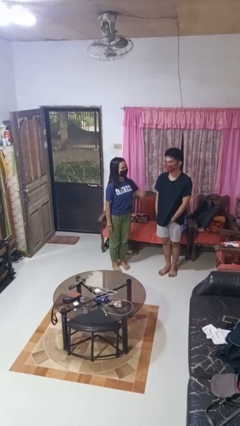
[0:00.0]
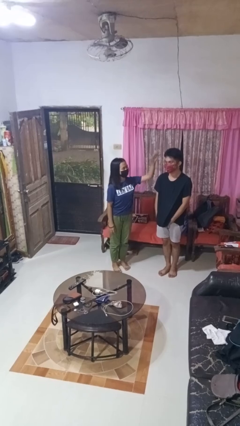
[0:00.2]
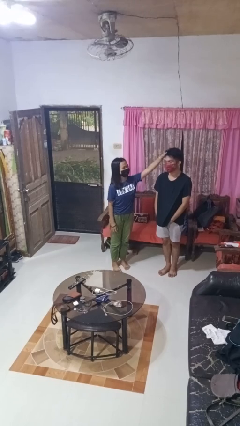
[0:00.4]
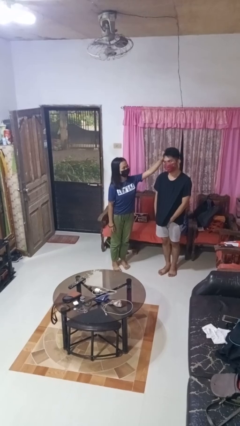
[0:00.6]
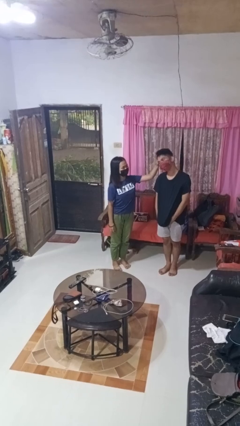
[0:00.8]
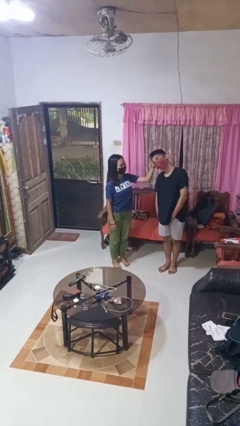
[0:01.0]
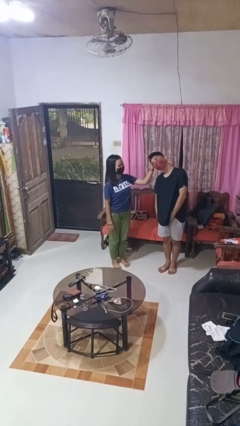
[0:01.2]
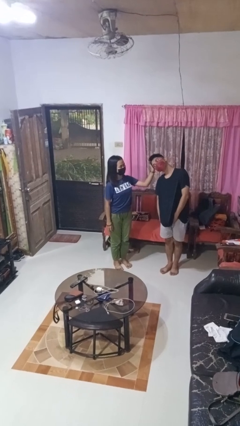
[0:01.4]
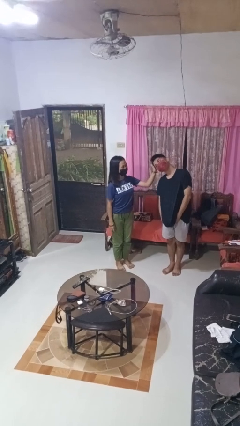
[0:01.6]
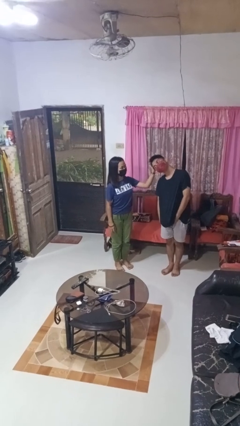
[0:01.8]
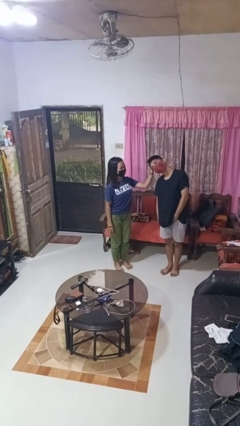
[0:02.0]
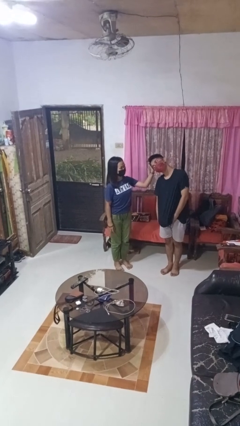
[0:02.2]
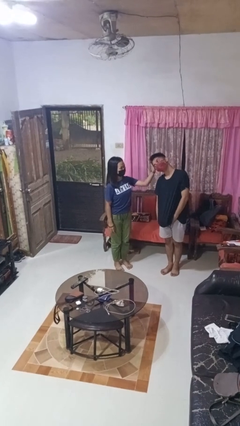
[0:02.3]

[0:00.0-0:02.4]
person grabs person by hair

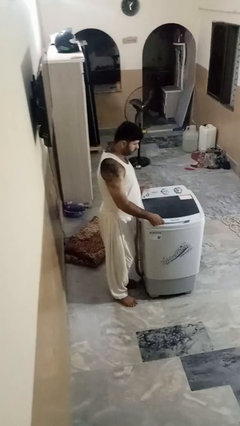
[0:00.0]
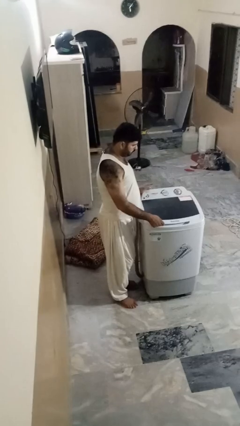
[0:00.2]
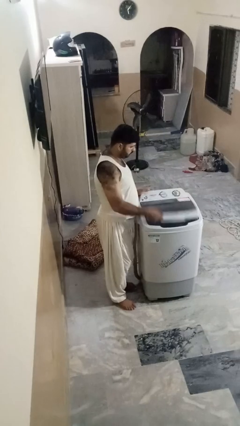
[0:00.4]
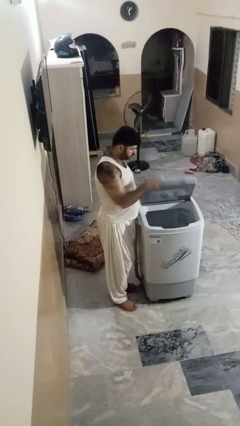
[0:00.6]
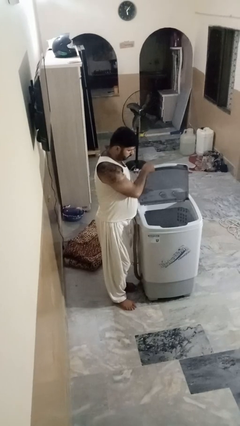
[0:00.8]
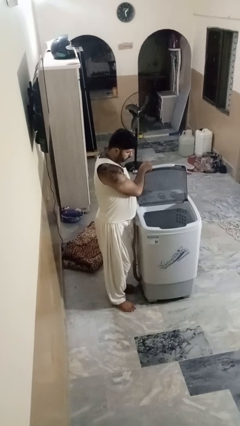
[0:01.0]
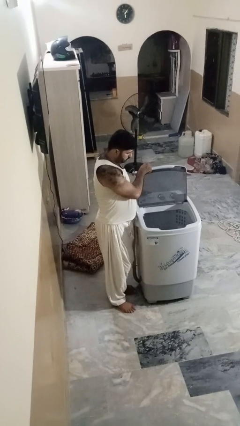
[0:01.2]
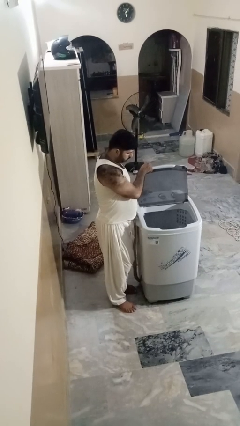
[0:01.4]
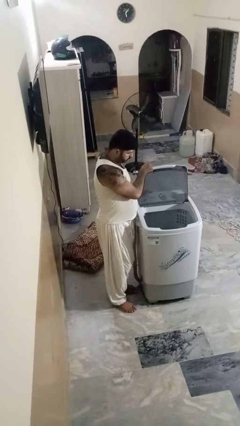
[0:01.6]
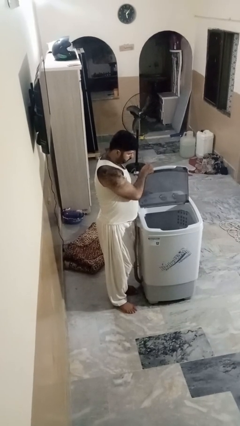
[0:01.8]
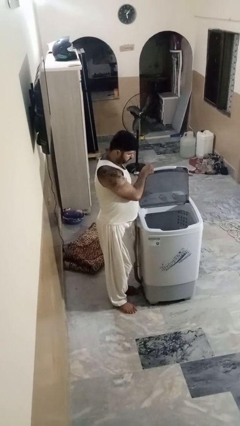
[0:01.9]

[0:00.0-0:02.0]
person opens clothes washer

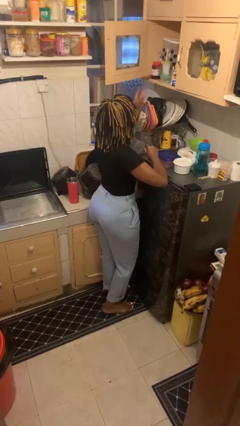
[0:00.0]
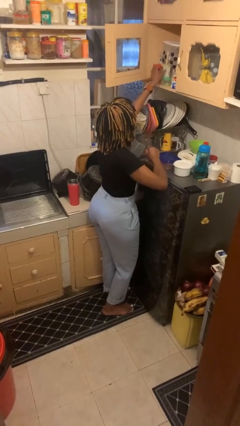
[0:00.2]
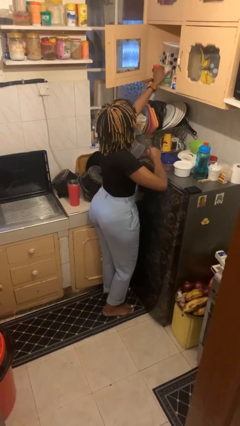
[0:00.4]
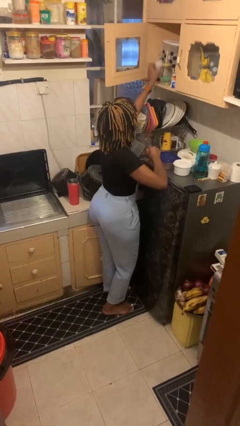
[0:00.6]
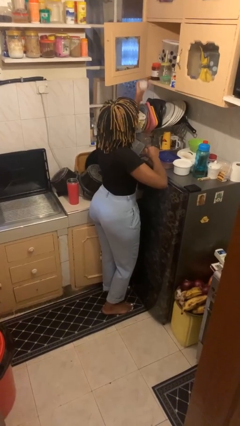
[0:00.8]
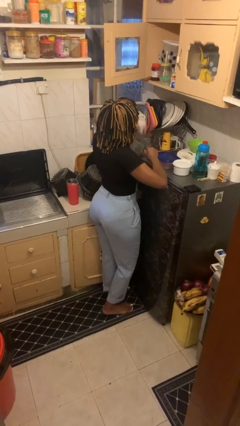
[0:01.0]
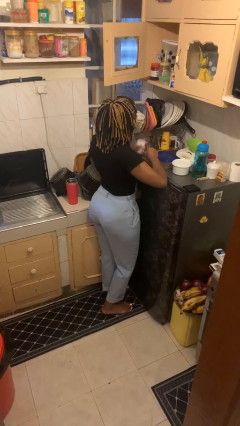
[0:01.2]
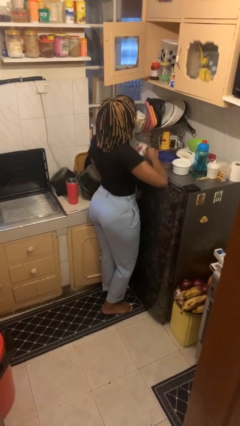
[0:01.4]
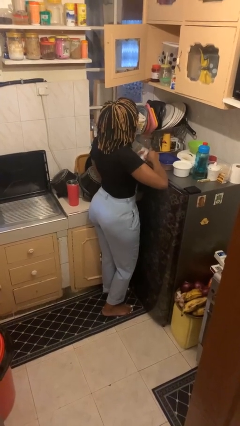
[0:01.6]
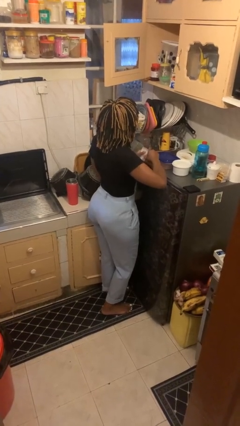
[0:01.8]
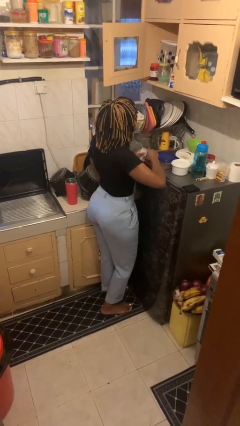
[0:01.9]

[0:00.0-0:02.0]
person takes object from cabinet

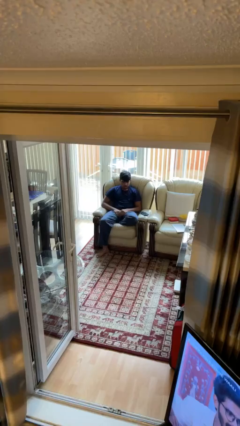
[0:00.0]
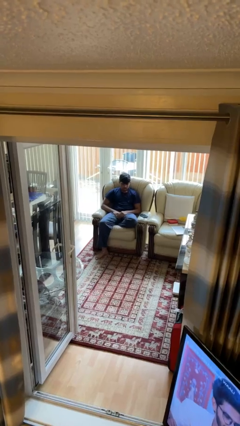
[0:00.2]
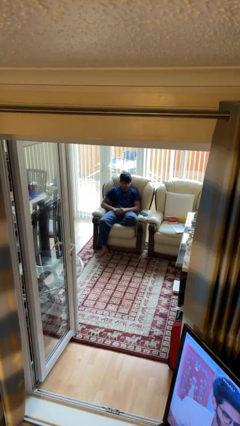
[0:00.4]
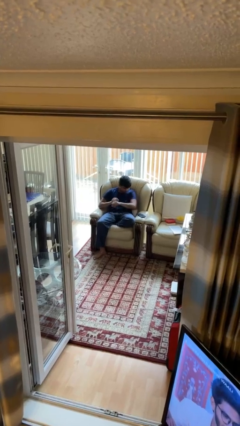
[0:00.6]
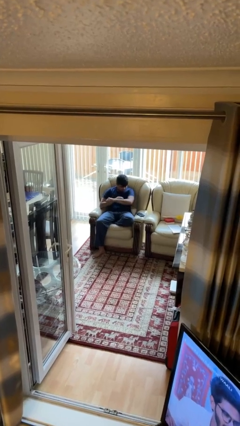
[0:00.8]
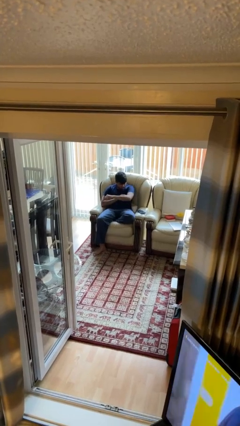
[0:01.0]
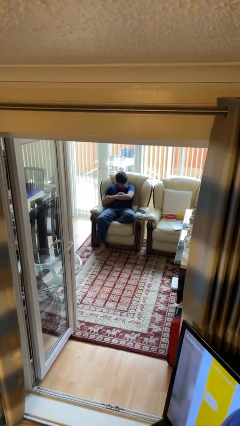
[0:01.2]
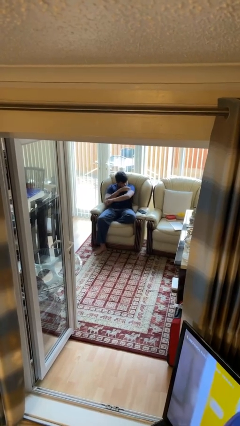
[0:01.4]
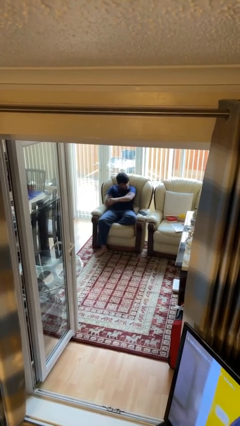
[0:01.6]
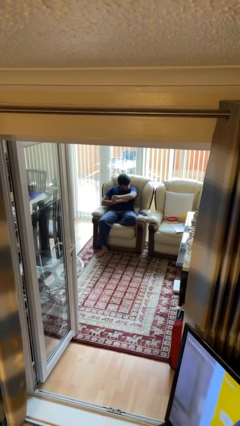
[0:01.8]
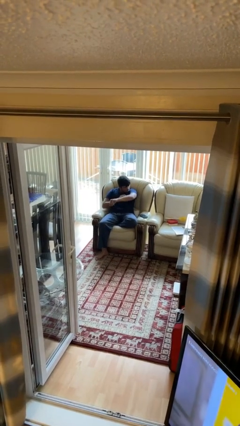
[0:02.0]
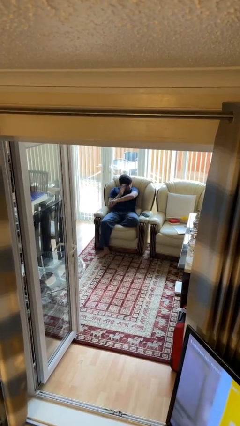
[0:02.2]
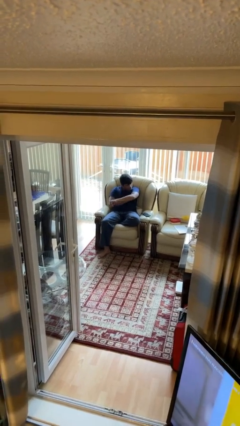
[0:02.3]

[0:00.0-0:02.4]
person swats bug

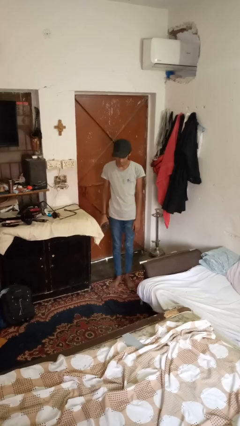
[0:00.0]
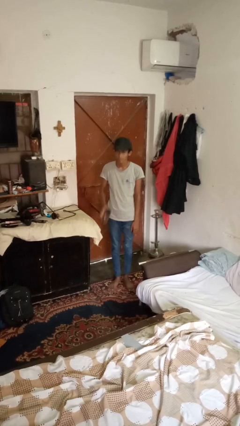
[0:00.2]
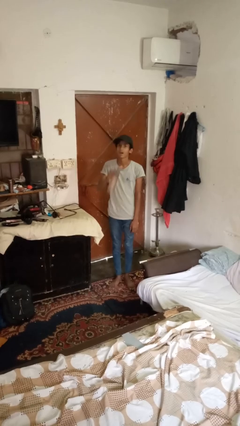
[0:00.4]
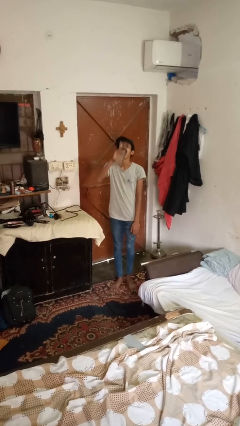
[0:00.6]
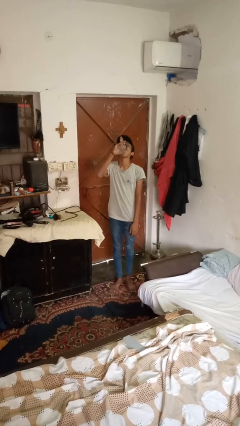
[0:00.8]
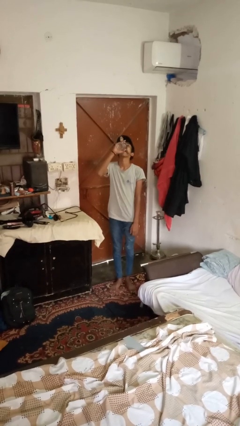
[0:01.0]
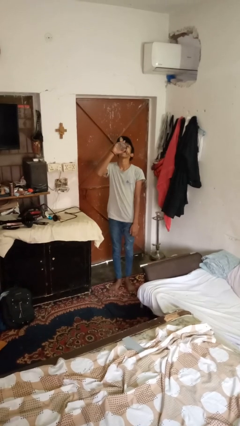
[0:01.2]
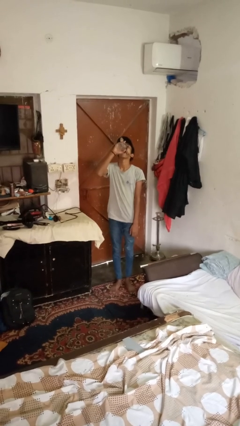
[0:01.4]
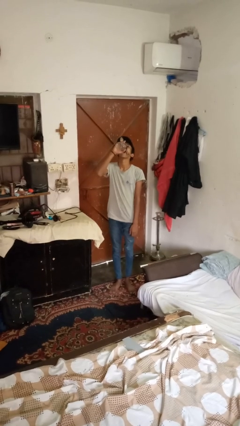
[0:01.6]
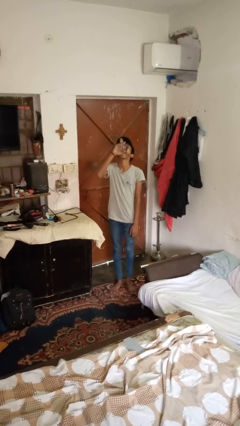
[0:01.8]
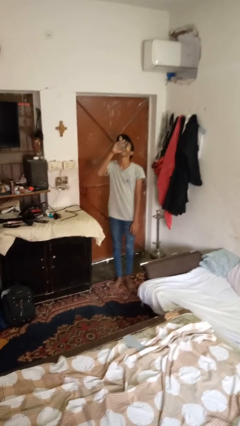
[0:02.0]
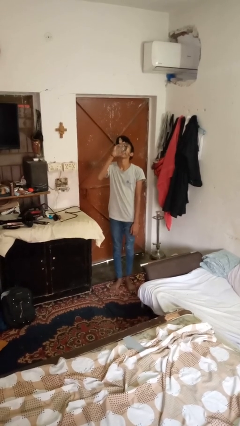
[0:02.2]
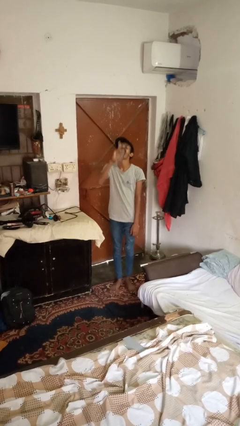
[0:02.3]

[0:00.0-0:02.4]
person drinks from bottle

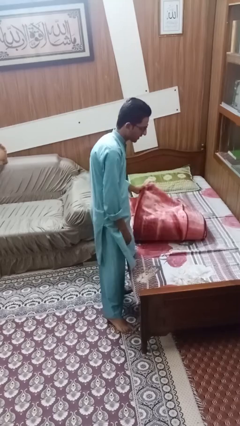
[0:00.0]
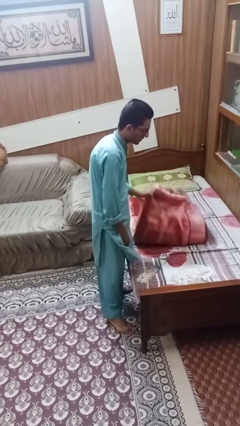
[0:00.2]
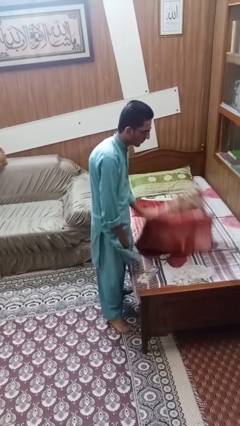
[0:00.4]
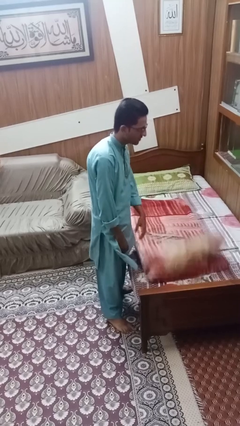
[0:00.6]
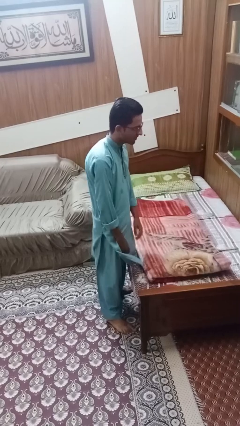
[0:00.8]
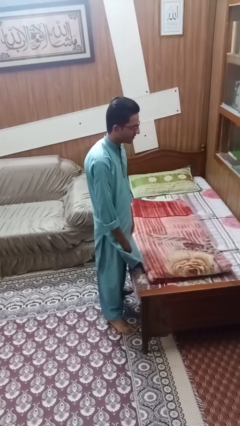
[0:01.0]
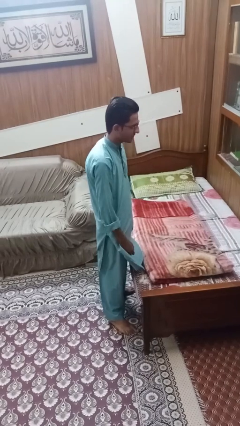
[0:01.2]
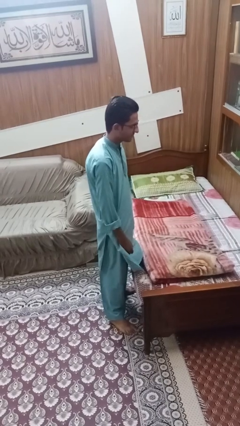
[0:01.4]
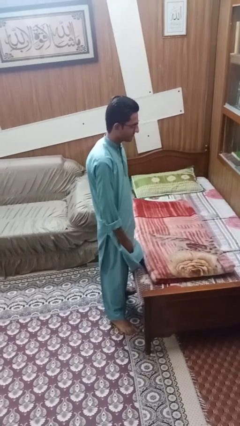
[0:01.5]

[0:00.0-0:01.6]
person unfolds blanket

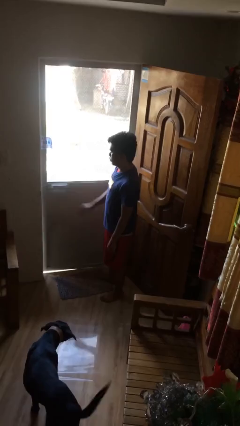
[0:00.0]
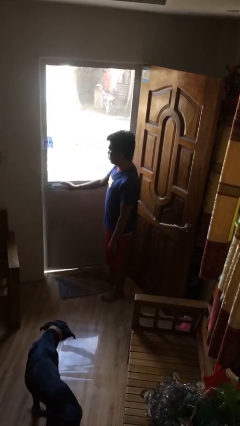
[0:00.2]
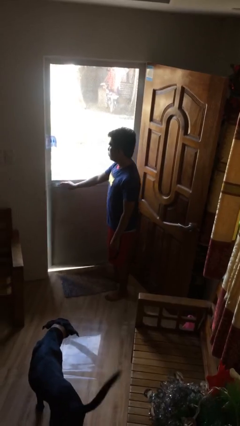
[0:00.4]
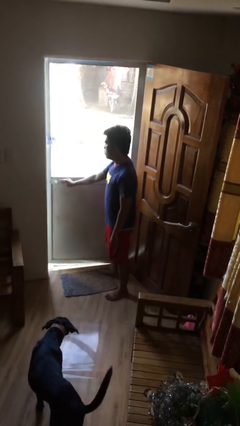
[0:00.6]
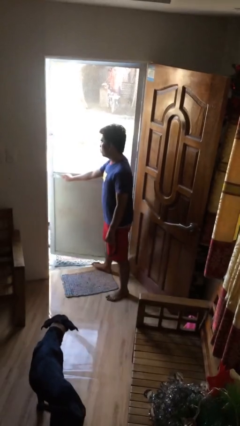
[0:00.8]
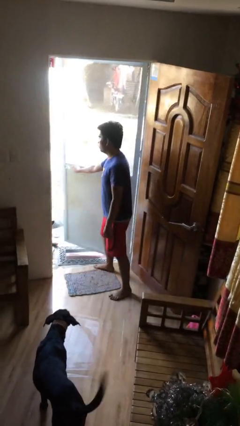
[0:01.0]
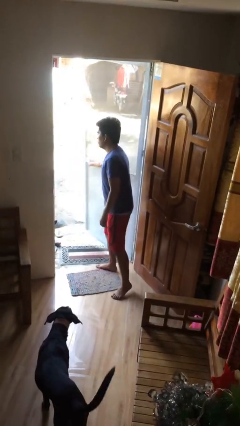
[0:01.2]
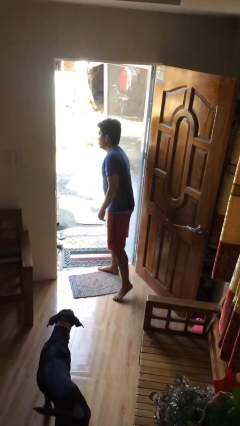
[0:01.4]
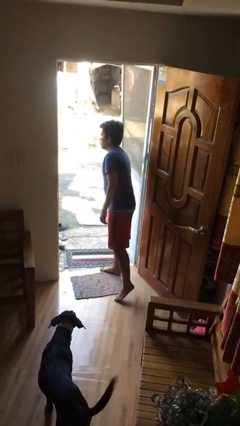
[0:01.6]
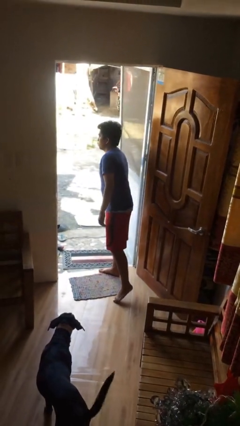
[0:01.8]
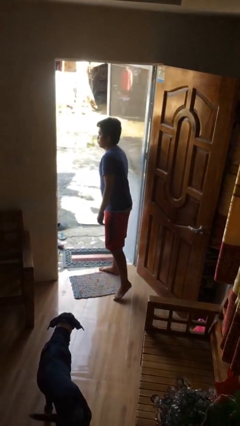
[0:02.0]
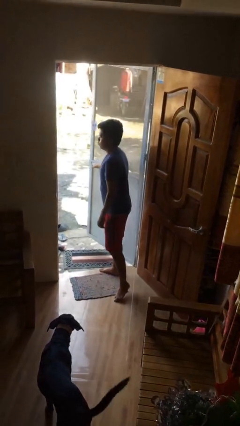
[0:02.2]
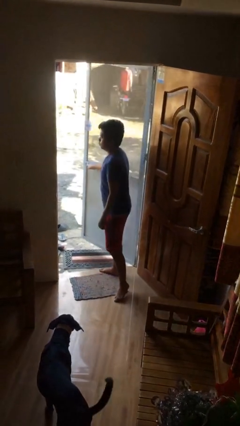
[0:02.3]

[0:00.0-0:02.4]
person opens facility door

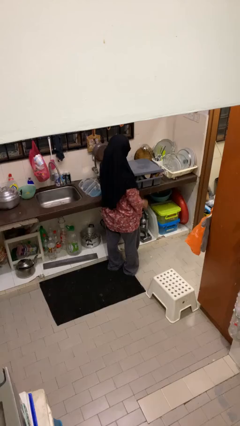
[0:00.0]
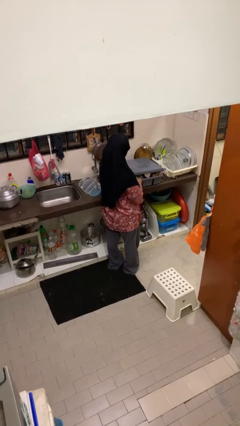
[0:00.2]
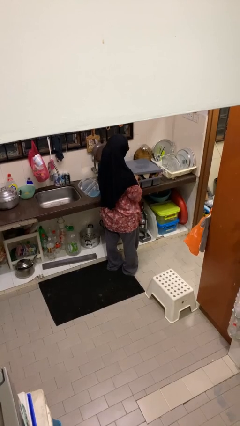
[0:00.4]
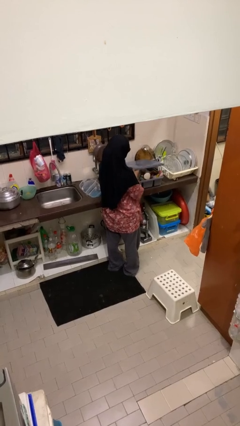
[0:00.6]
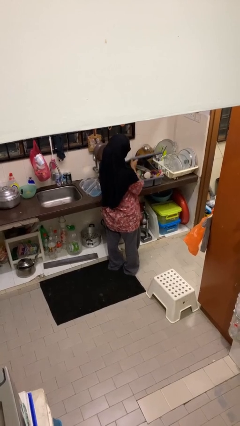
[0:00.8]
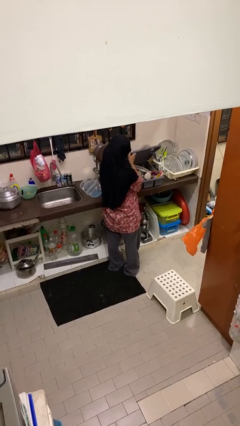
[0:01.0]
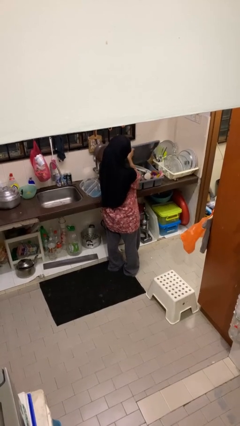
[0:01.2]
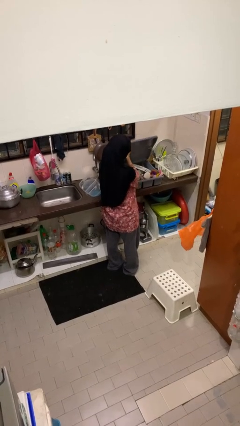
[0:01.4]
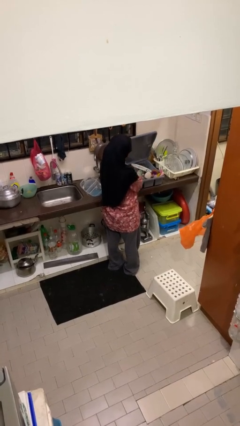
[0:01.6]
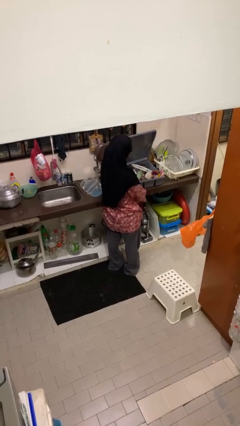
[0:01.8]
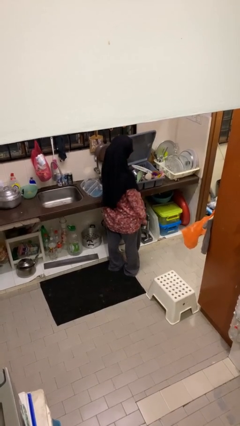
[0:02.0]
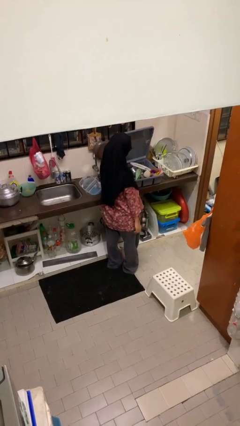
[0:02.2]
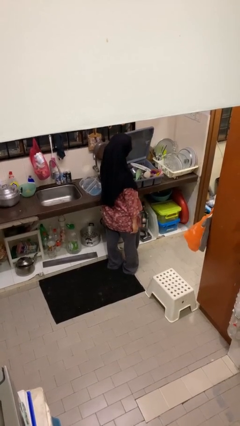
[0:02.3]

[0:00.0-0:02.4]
person opens dishwasher
